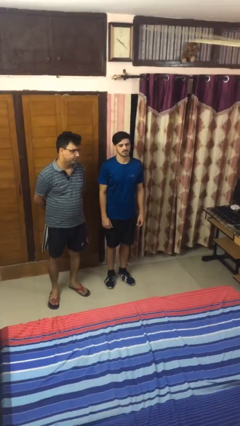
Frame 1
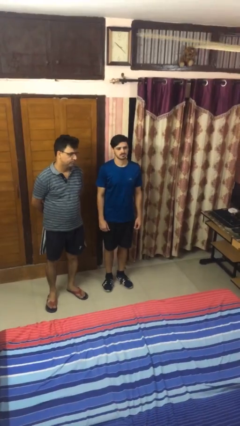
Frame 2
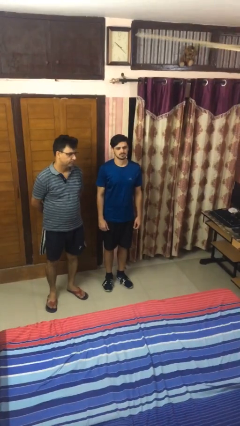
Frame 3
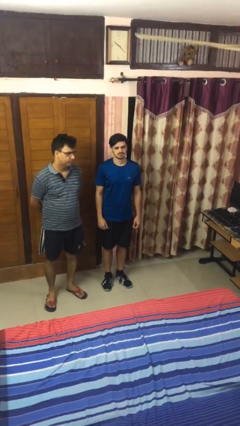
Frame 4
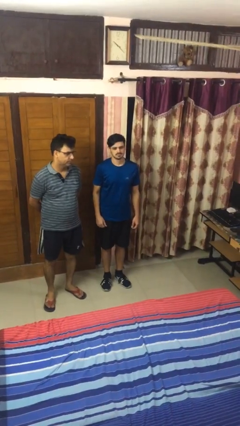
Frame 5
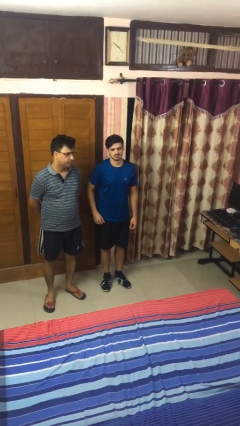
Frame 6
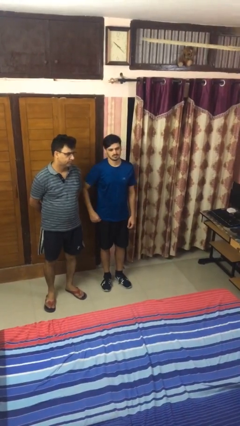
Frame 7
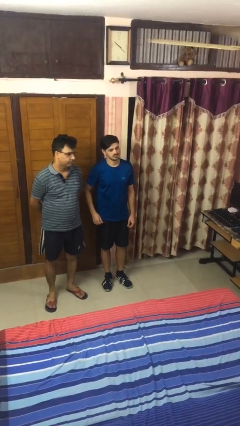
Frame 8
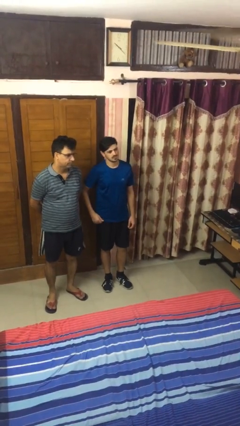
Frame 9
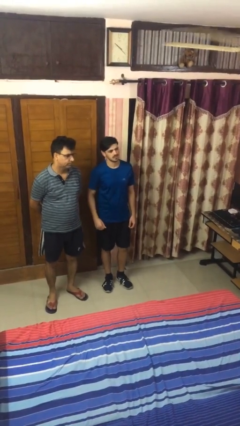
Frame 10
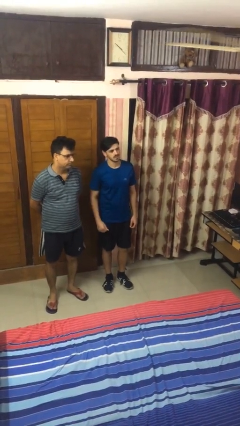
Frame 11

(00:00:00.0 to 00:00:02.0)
person nudges person with elbow

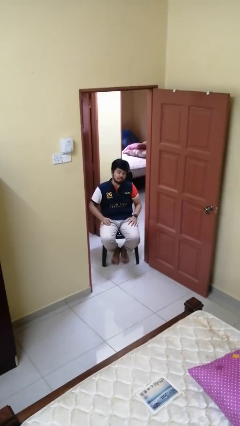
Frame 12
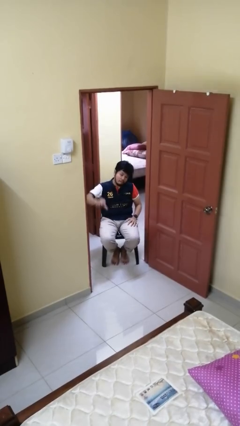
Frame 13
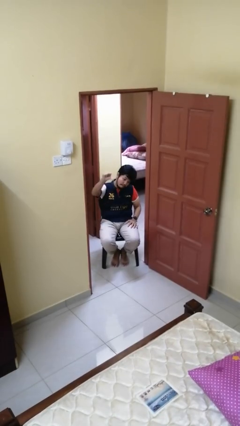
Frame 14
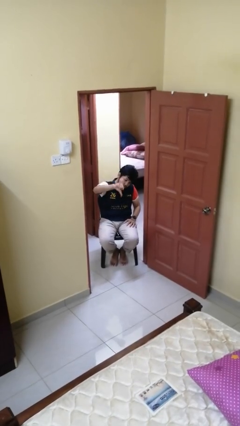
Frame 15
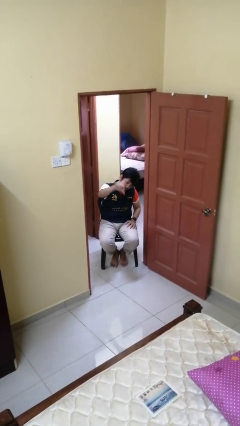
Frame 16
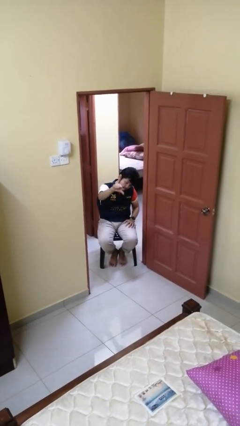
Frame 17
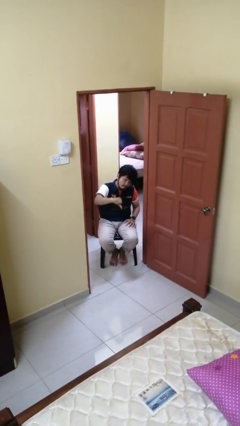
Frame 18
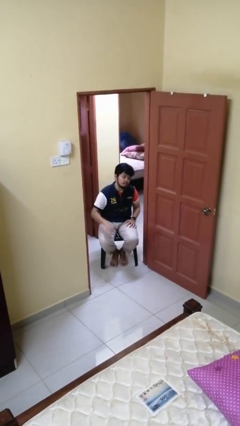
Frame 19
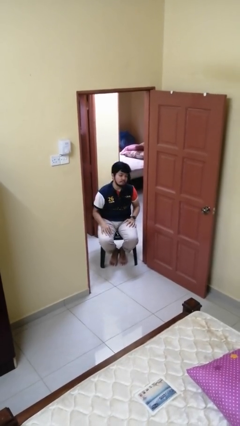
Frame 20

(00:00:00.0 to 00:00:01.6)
person gestures thumbs down

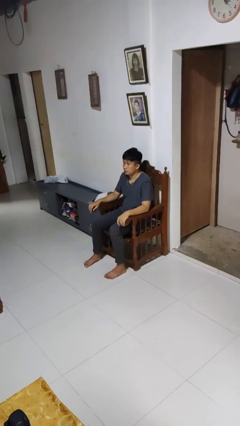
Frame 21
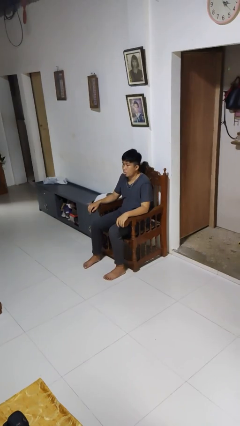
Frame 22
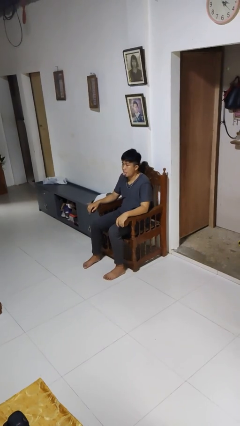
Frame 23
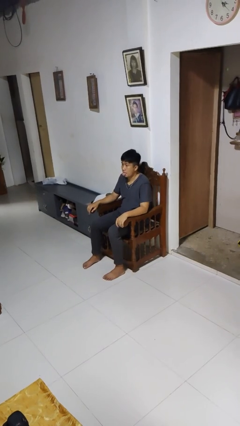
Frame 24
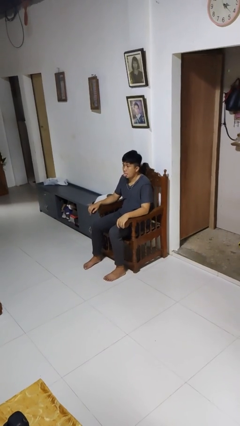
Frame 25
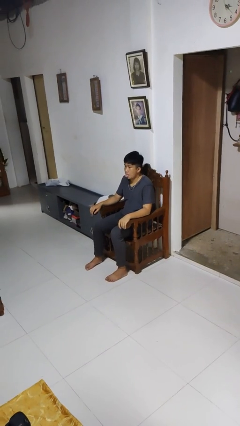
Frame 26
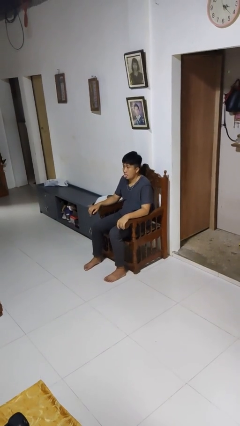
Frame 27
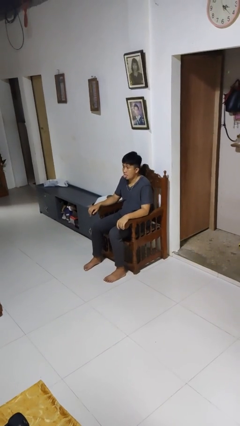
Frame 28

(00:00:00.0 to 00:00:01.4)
person sticks out tongue

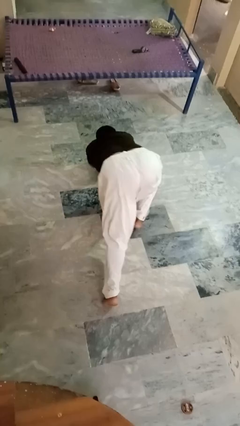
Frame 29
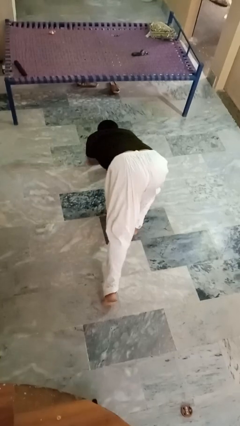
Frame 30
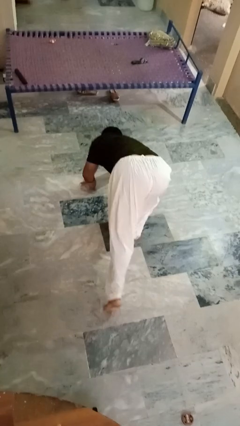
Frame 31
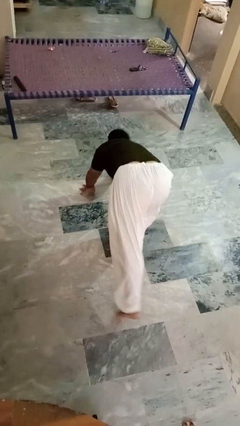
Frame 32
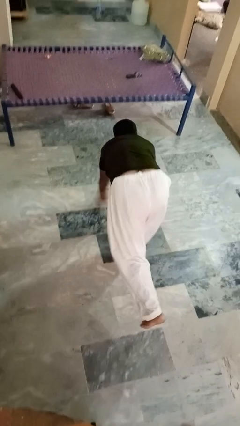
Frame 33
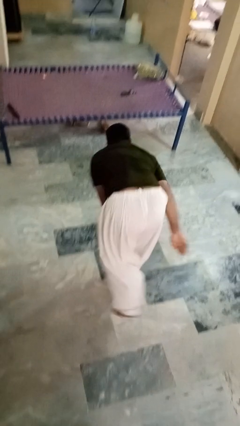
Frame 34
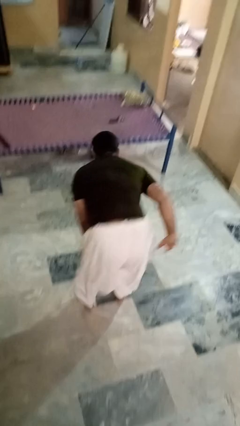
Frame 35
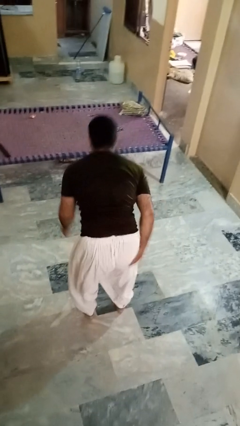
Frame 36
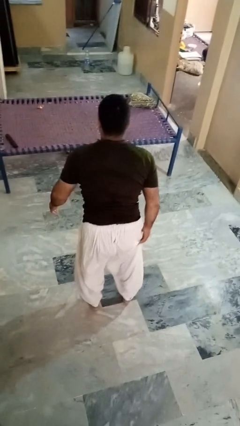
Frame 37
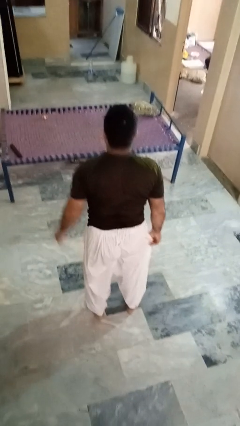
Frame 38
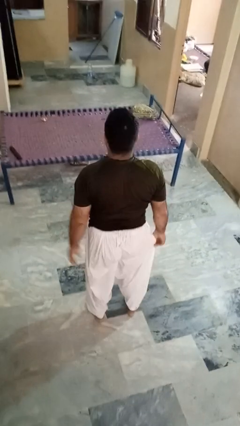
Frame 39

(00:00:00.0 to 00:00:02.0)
person stands up from floor

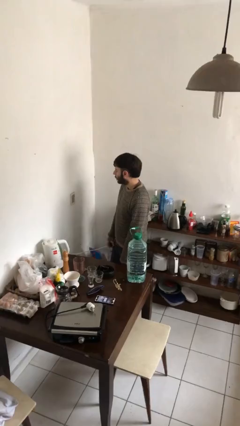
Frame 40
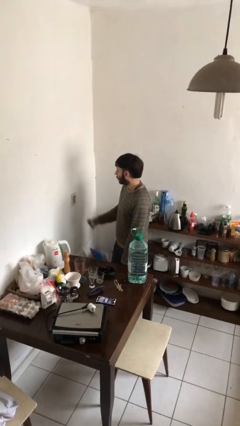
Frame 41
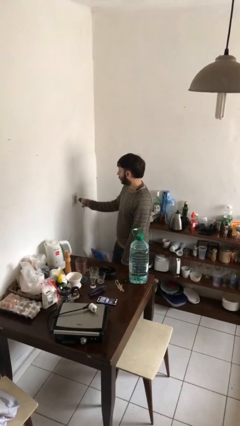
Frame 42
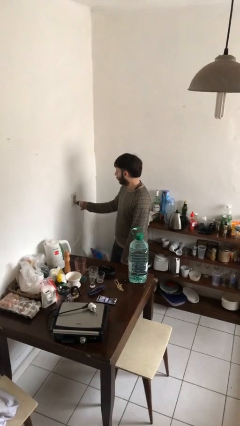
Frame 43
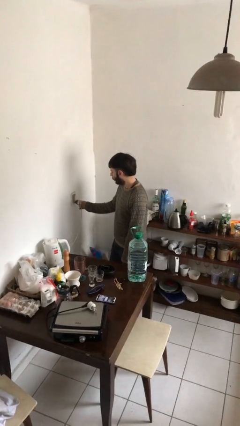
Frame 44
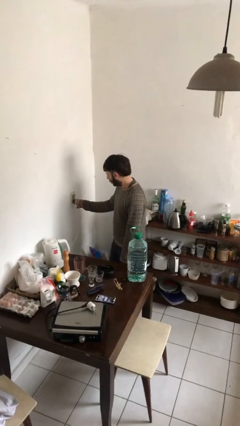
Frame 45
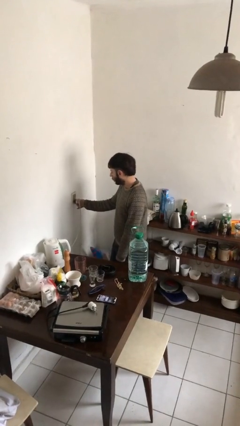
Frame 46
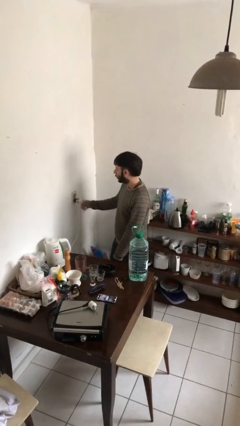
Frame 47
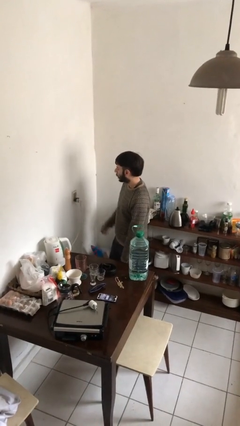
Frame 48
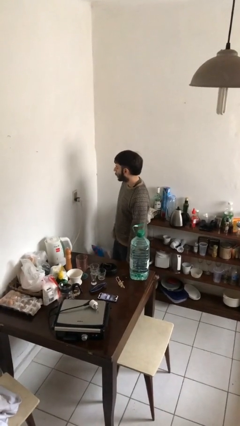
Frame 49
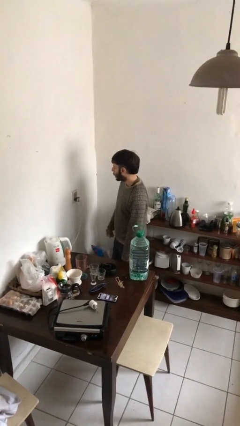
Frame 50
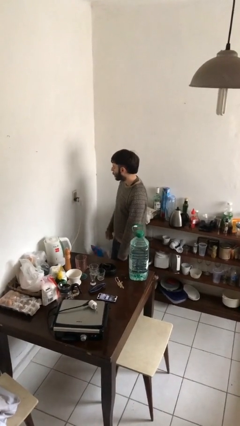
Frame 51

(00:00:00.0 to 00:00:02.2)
person plugs into electrical socket

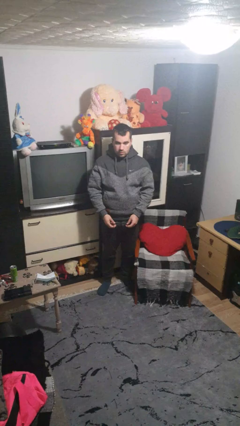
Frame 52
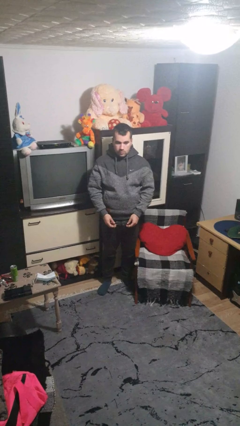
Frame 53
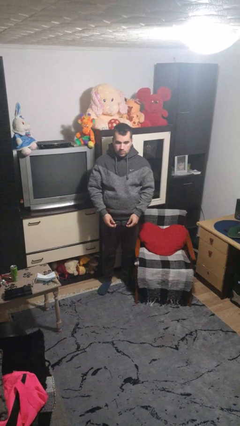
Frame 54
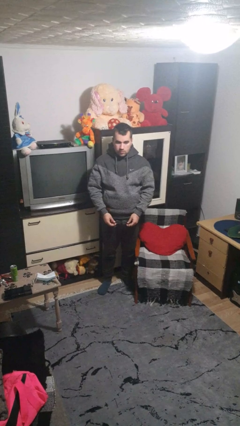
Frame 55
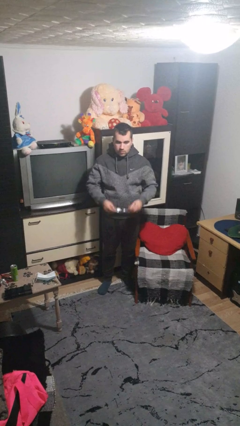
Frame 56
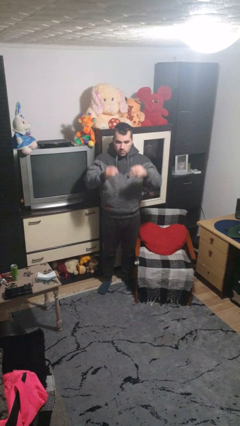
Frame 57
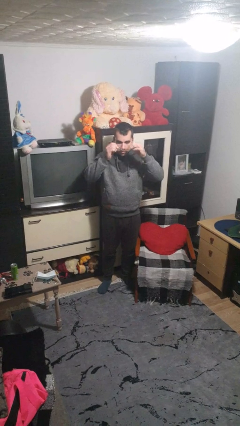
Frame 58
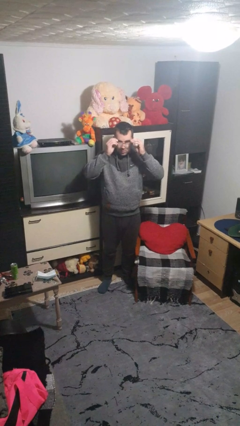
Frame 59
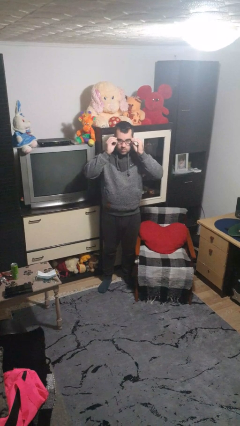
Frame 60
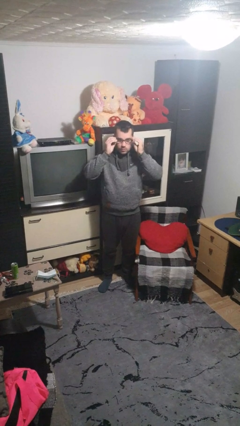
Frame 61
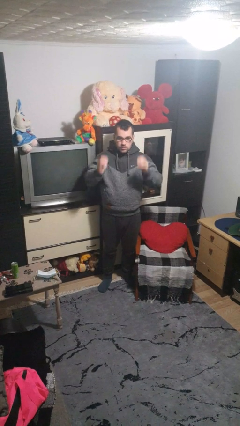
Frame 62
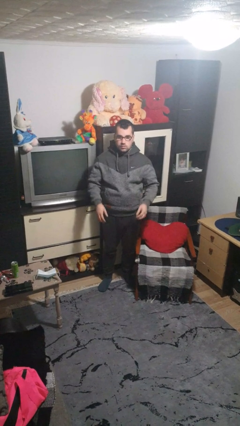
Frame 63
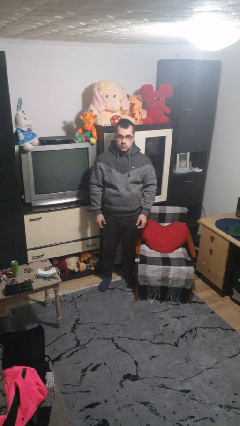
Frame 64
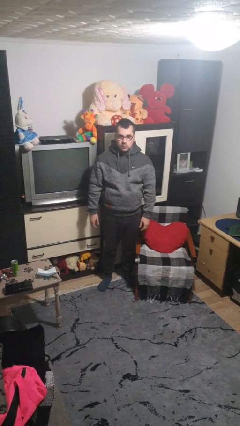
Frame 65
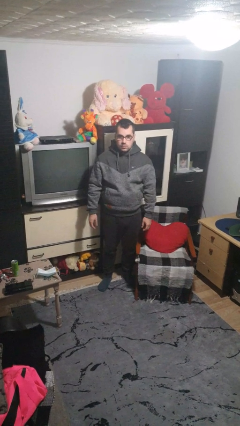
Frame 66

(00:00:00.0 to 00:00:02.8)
person puts on glasses

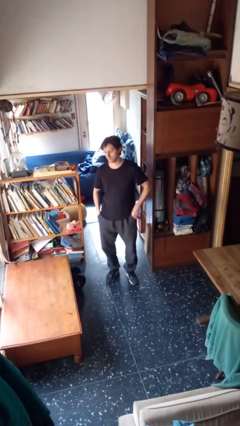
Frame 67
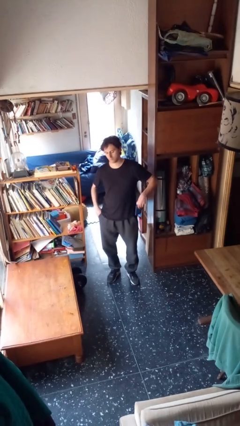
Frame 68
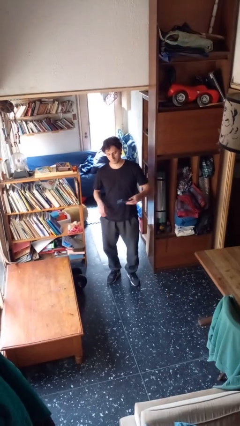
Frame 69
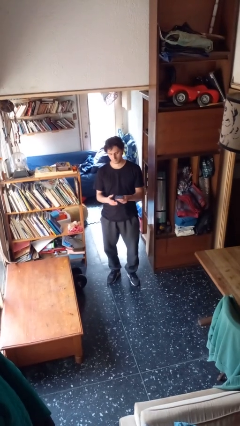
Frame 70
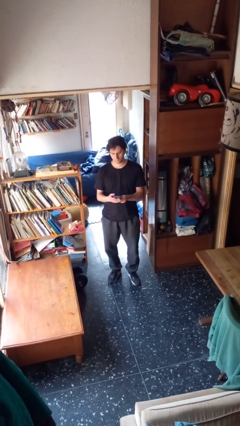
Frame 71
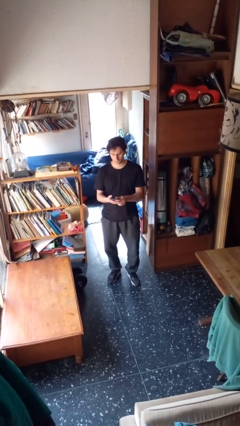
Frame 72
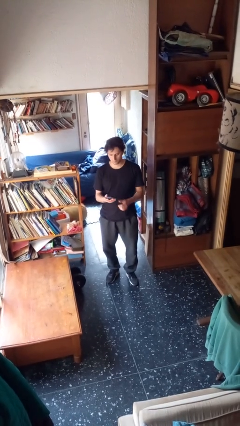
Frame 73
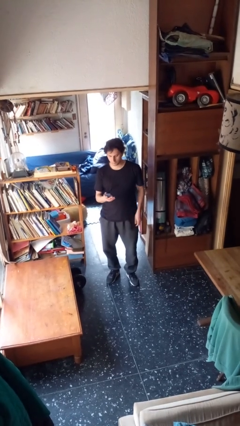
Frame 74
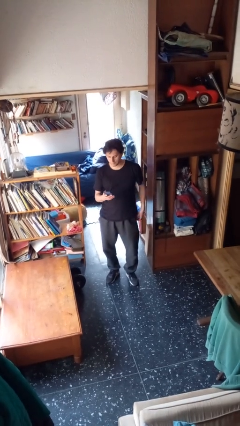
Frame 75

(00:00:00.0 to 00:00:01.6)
person takes phone from pocket

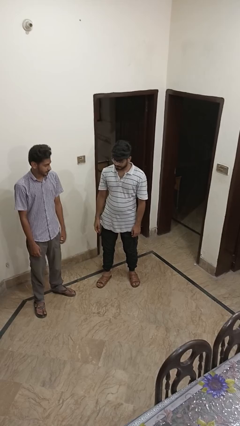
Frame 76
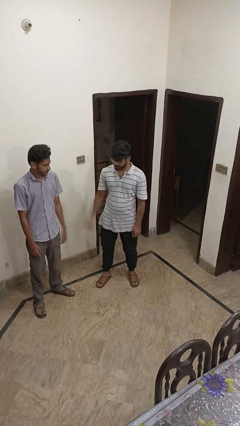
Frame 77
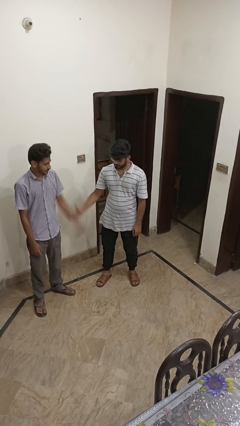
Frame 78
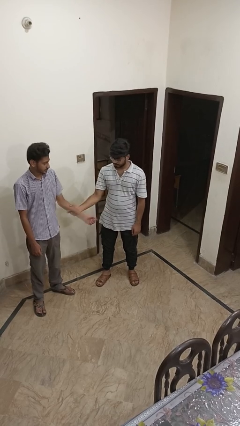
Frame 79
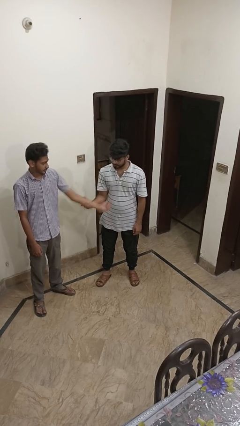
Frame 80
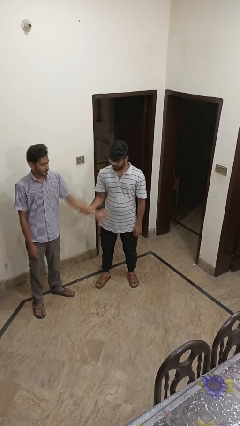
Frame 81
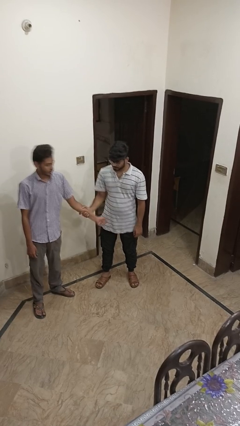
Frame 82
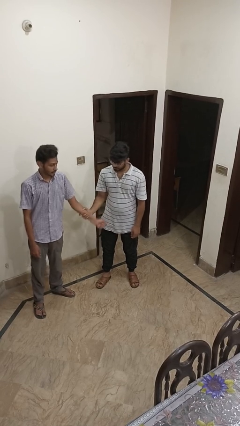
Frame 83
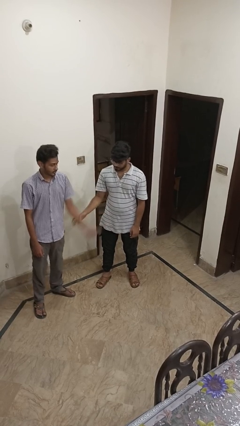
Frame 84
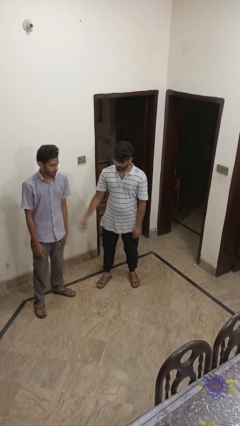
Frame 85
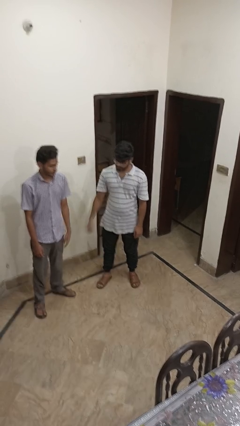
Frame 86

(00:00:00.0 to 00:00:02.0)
person grabs person by forearm

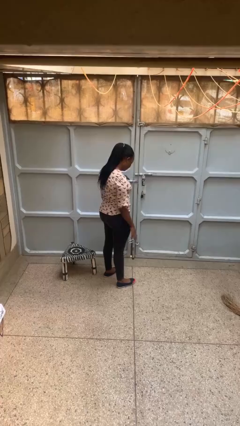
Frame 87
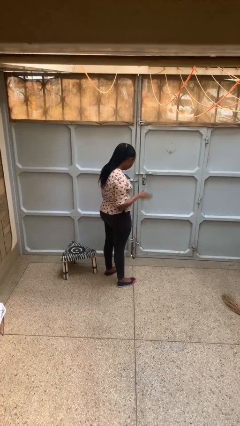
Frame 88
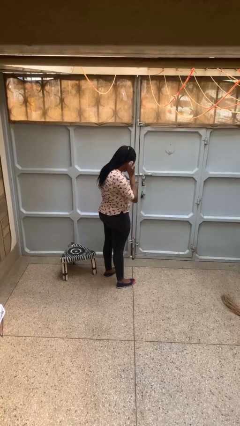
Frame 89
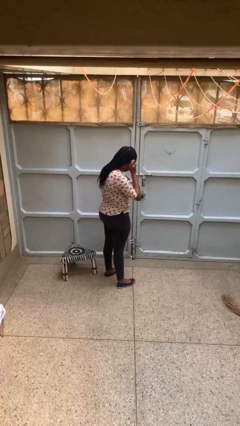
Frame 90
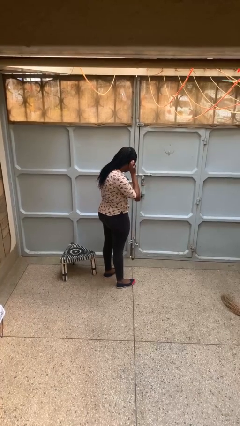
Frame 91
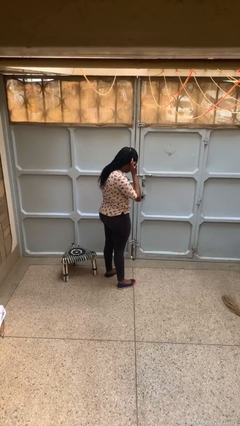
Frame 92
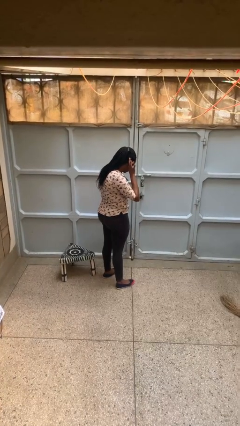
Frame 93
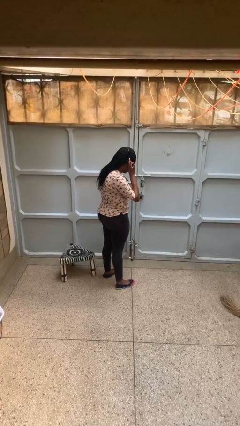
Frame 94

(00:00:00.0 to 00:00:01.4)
person gestures listen closely
